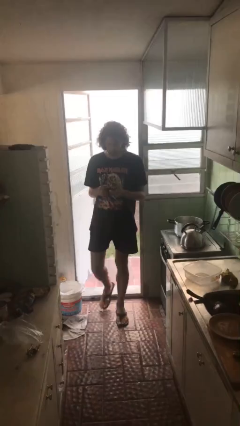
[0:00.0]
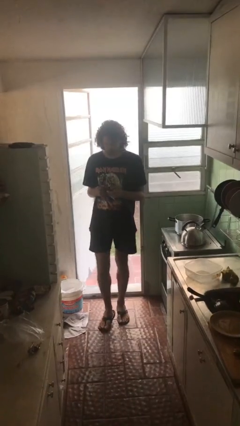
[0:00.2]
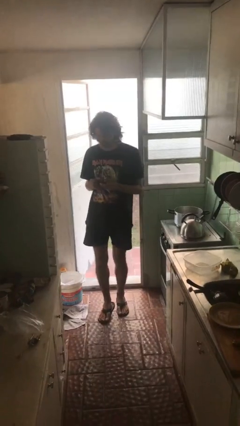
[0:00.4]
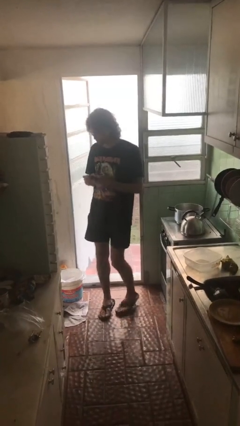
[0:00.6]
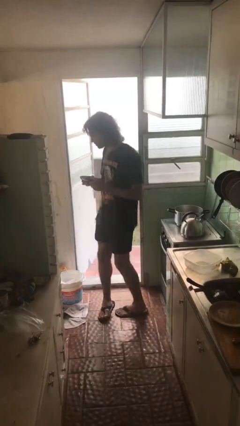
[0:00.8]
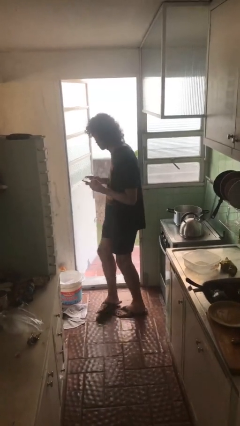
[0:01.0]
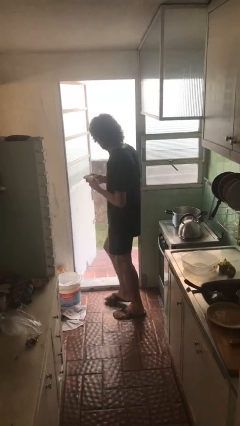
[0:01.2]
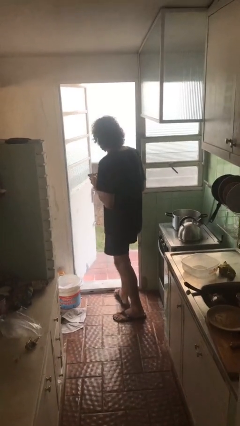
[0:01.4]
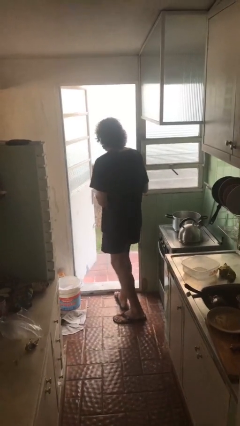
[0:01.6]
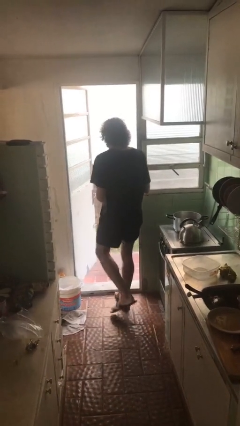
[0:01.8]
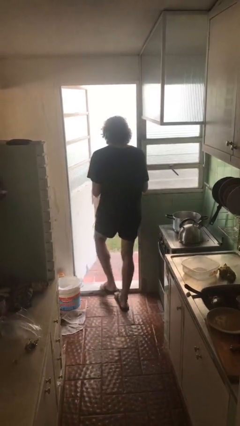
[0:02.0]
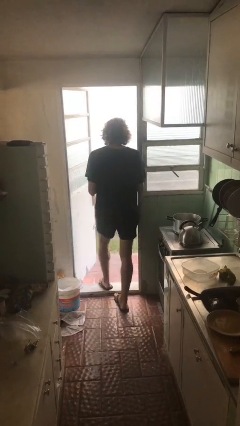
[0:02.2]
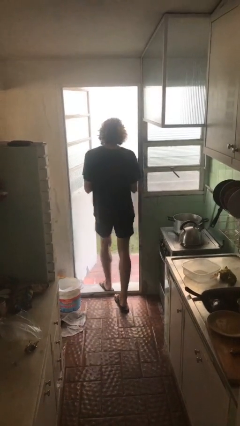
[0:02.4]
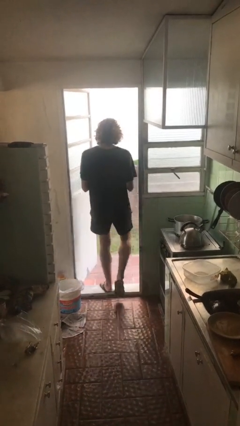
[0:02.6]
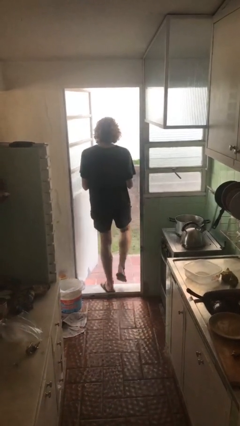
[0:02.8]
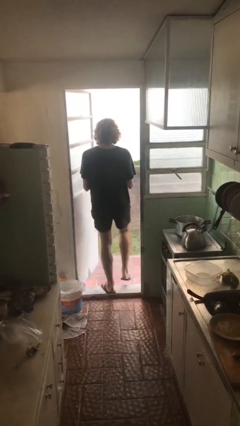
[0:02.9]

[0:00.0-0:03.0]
person exits scene through structure

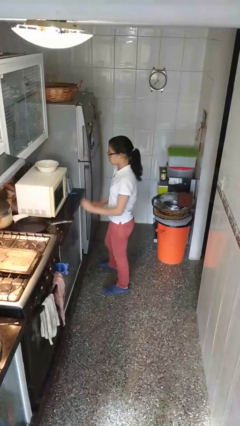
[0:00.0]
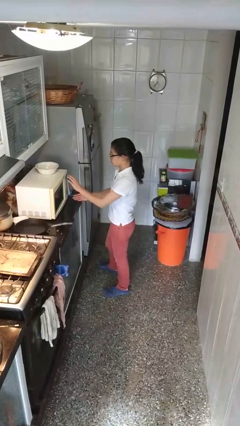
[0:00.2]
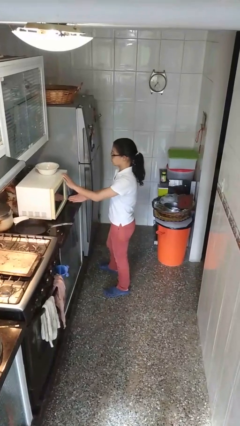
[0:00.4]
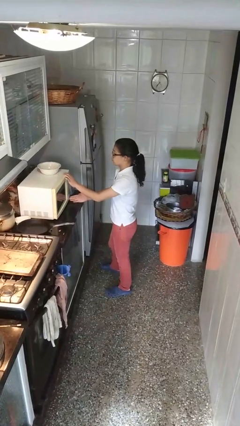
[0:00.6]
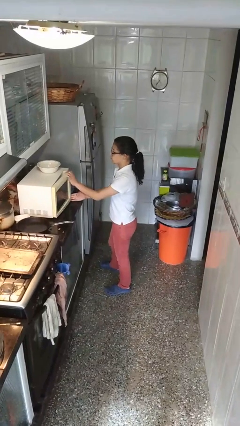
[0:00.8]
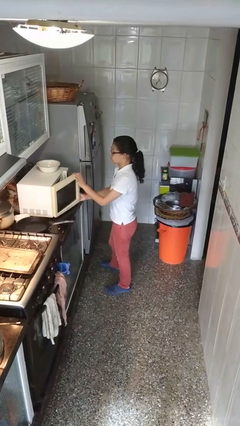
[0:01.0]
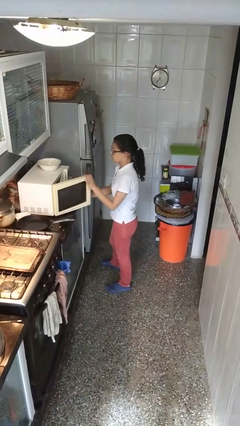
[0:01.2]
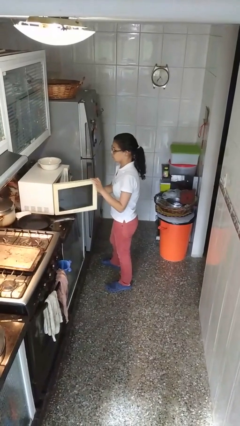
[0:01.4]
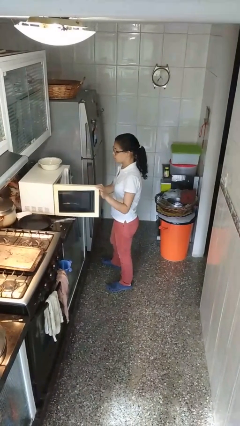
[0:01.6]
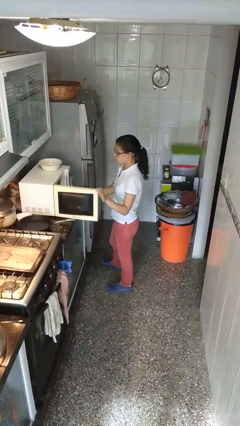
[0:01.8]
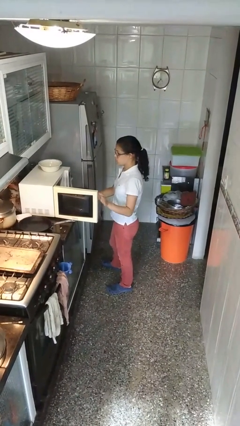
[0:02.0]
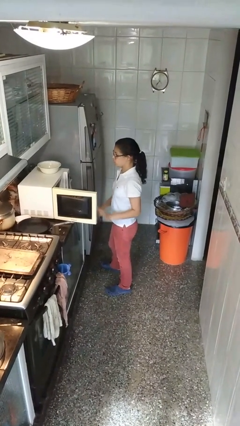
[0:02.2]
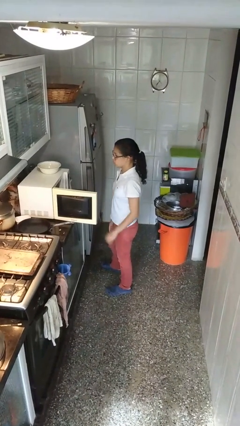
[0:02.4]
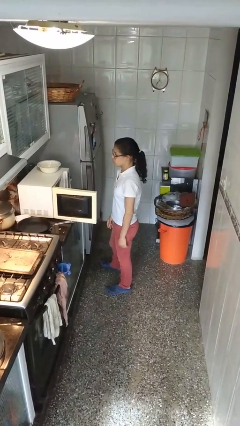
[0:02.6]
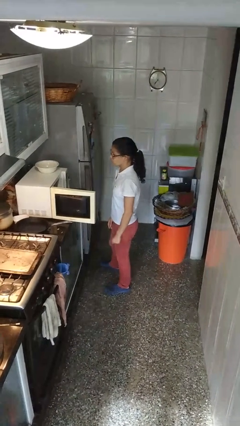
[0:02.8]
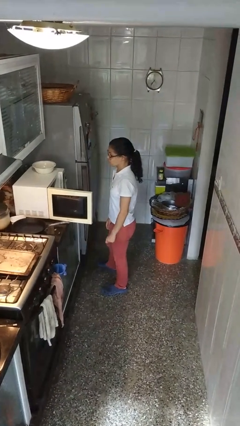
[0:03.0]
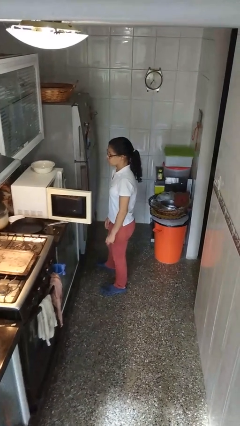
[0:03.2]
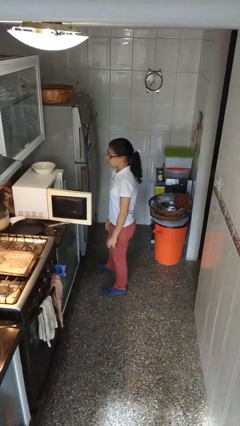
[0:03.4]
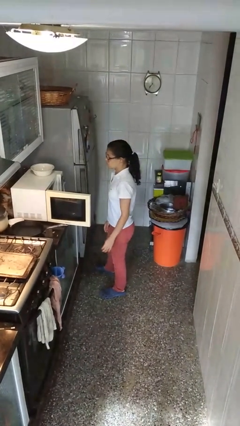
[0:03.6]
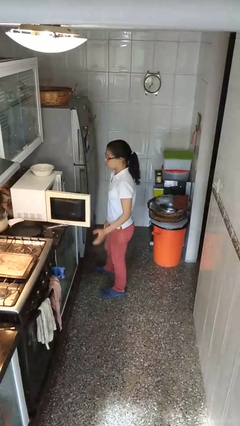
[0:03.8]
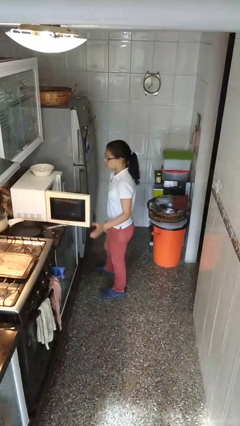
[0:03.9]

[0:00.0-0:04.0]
person opens microwave

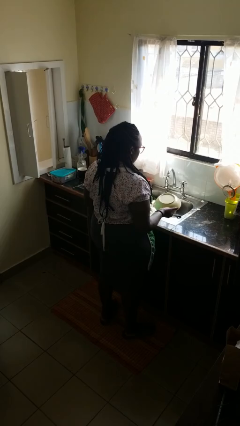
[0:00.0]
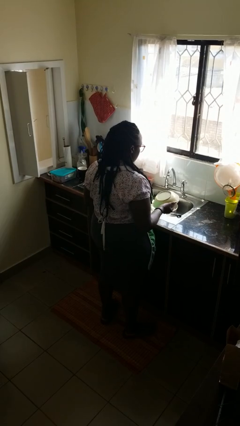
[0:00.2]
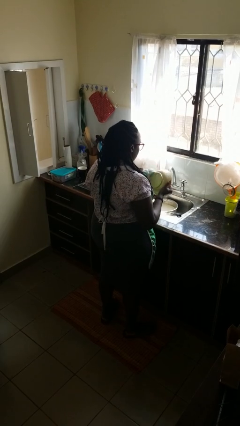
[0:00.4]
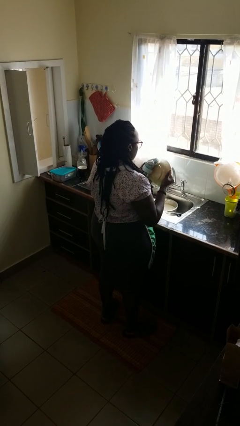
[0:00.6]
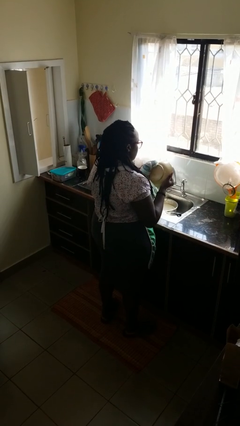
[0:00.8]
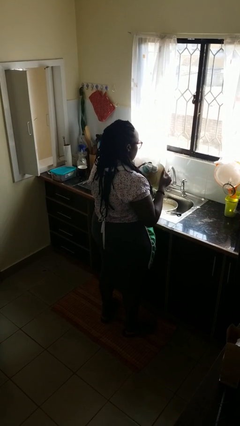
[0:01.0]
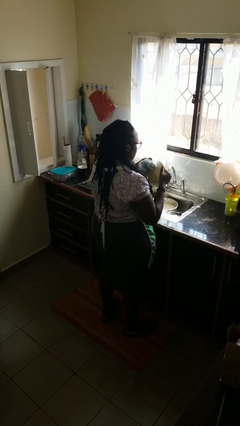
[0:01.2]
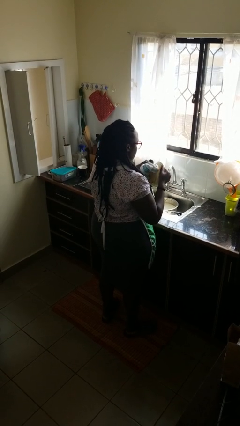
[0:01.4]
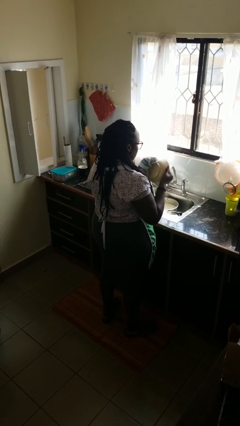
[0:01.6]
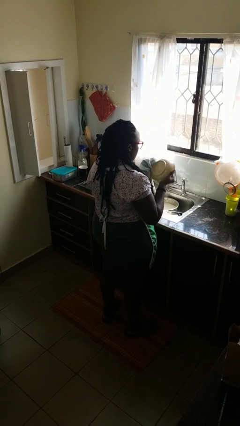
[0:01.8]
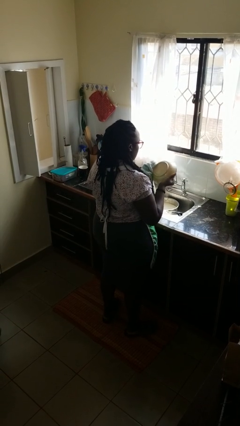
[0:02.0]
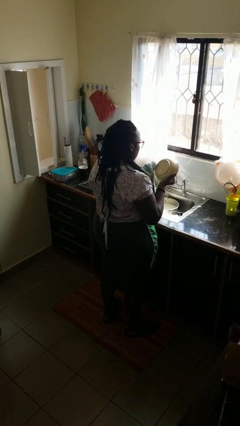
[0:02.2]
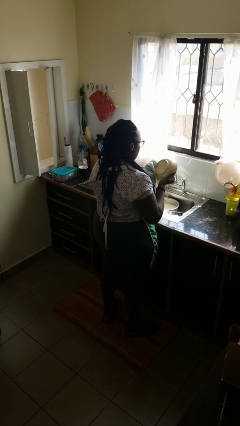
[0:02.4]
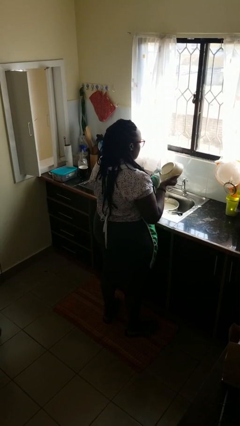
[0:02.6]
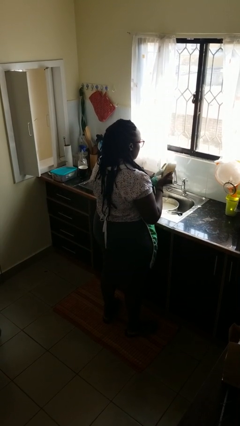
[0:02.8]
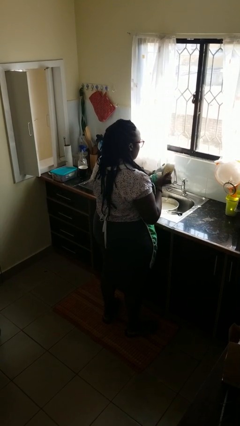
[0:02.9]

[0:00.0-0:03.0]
person dries dish

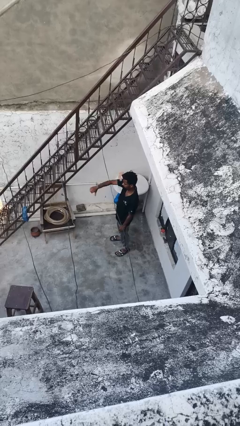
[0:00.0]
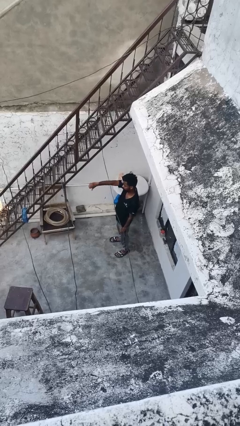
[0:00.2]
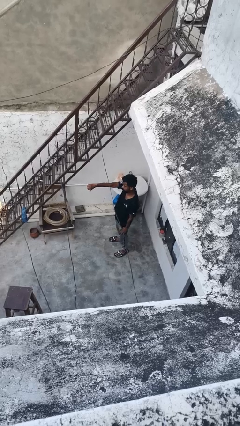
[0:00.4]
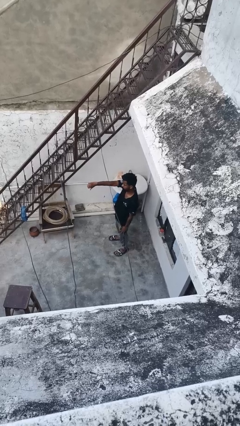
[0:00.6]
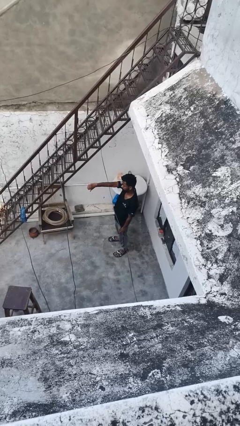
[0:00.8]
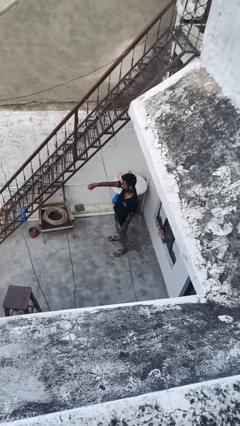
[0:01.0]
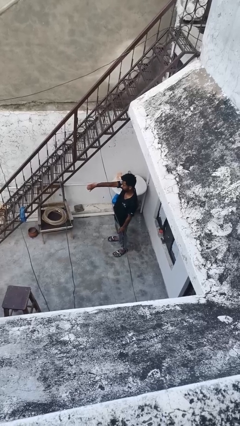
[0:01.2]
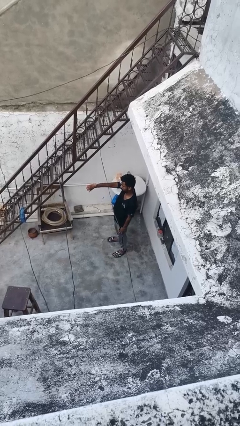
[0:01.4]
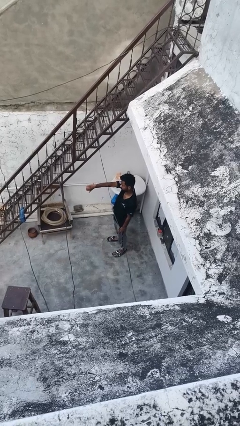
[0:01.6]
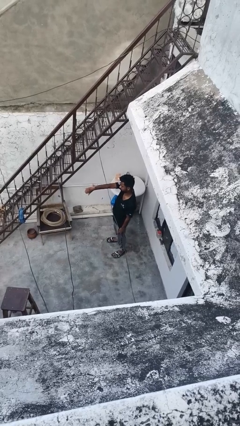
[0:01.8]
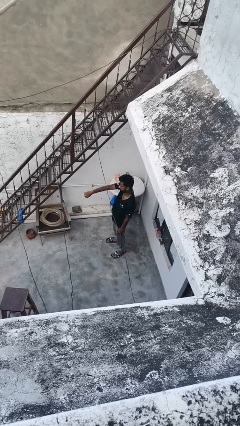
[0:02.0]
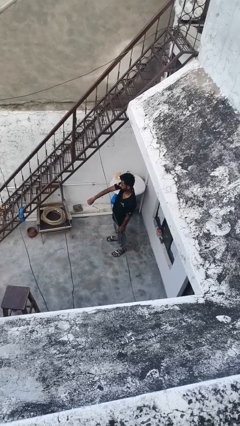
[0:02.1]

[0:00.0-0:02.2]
person gestures thumbs down

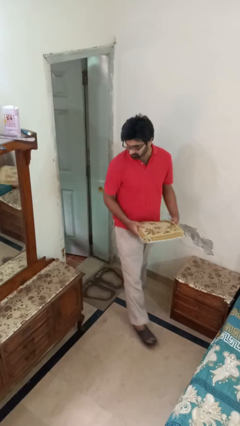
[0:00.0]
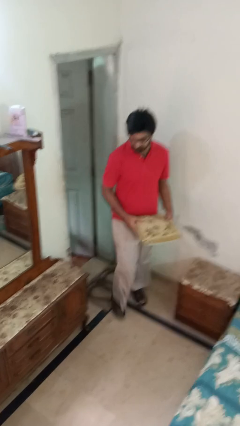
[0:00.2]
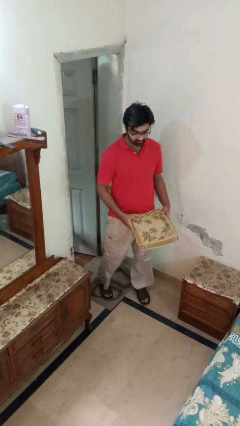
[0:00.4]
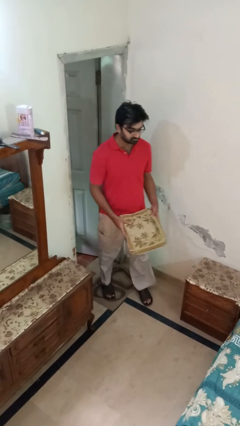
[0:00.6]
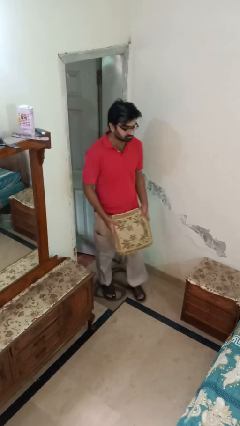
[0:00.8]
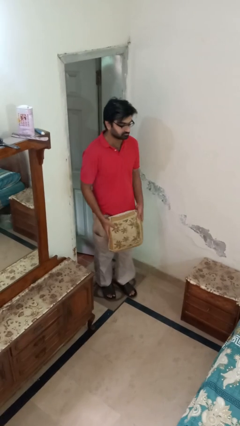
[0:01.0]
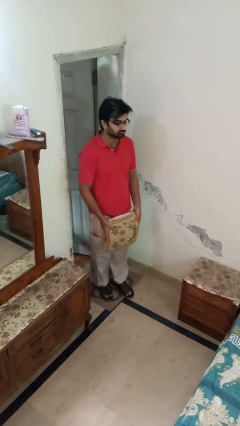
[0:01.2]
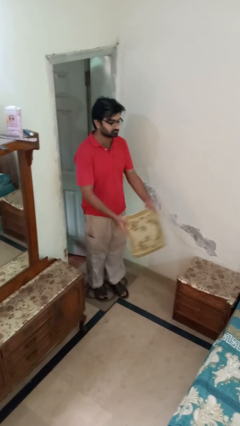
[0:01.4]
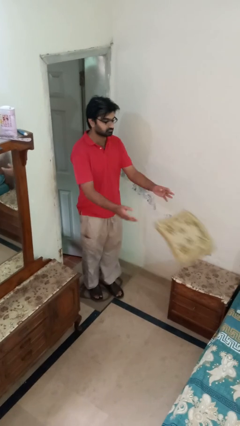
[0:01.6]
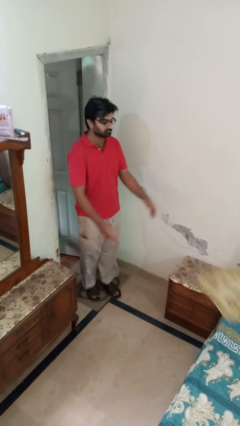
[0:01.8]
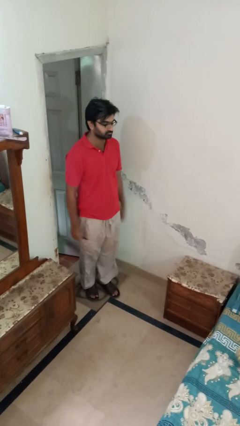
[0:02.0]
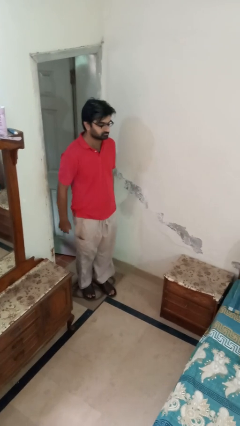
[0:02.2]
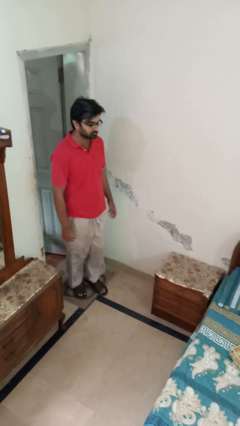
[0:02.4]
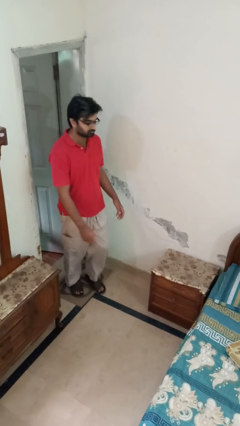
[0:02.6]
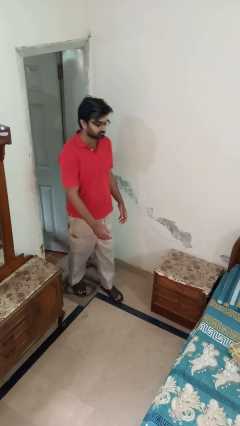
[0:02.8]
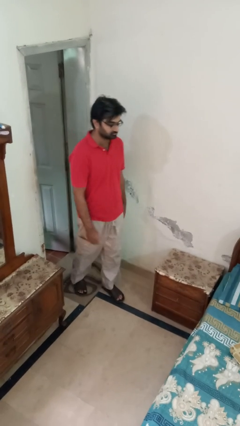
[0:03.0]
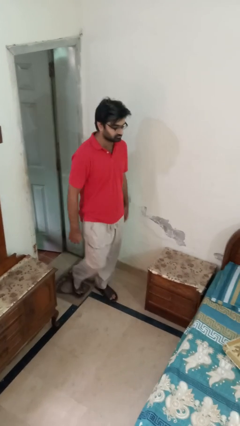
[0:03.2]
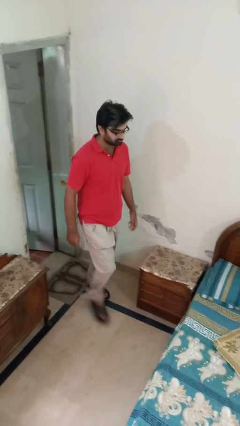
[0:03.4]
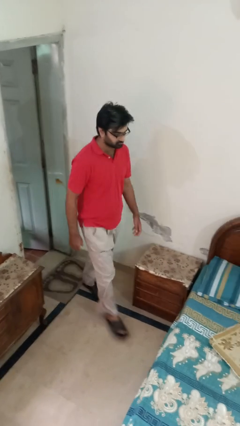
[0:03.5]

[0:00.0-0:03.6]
person throws object on bed

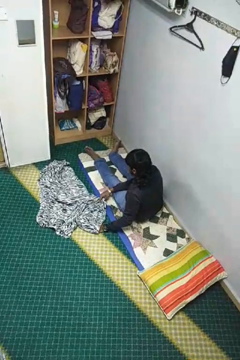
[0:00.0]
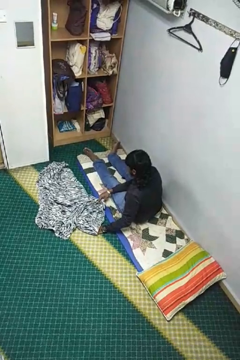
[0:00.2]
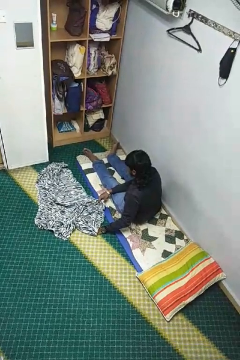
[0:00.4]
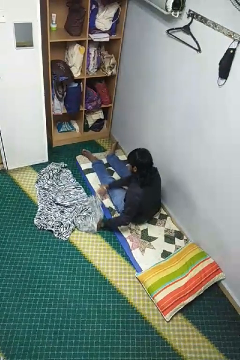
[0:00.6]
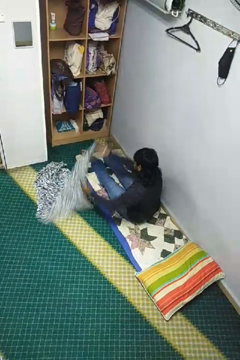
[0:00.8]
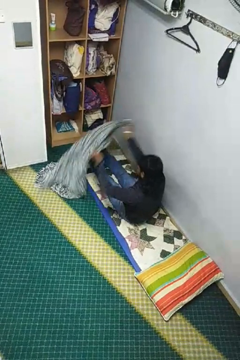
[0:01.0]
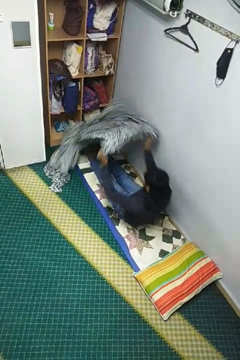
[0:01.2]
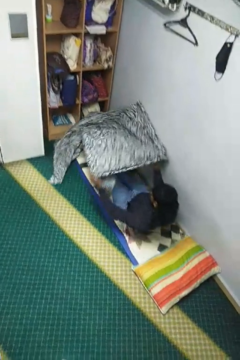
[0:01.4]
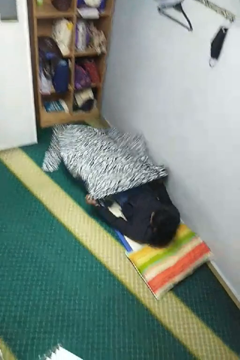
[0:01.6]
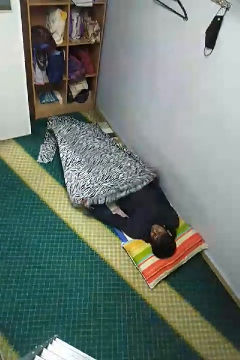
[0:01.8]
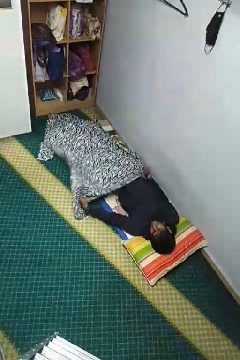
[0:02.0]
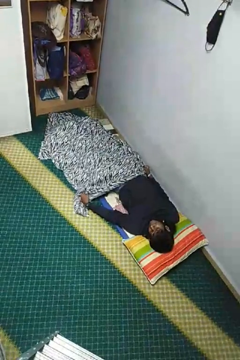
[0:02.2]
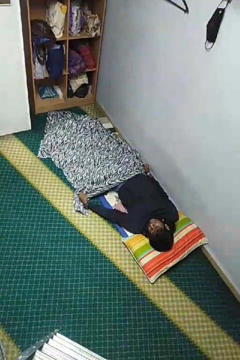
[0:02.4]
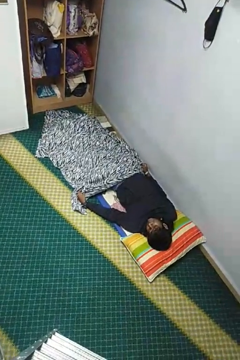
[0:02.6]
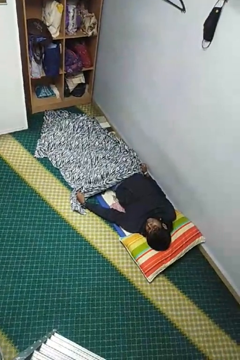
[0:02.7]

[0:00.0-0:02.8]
person covers with blanket
